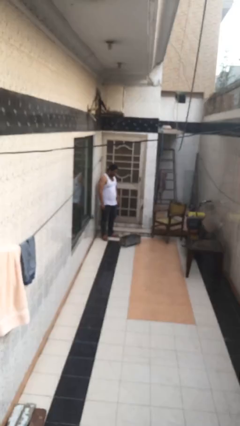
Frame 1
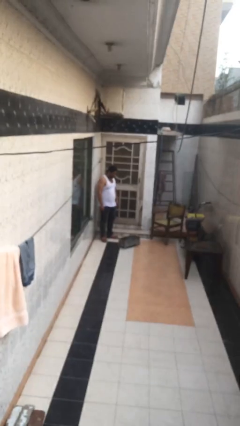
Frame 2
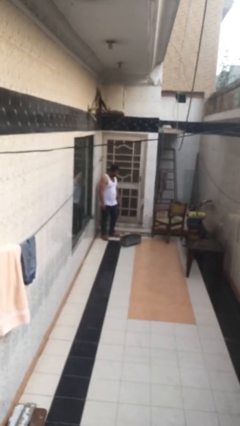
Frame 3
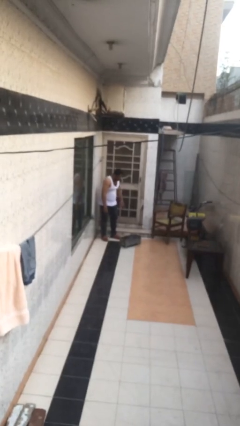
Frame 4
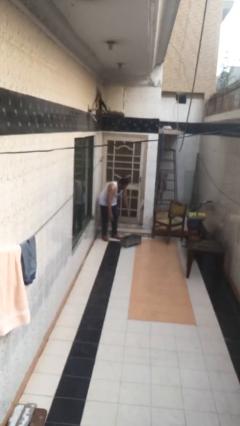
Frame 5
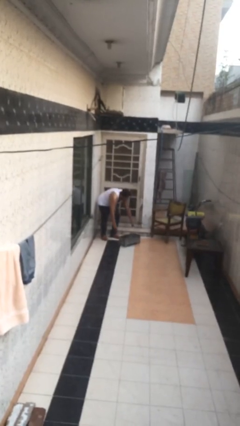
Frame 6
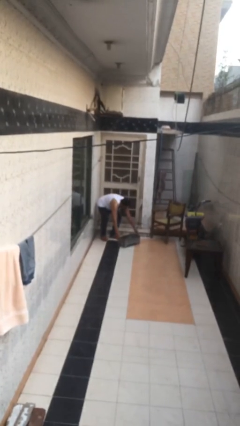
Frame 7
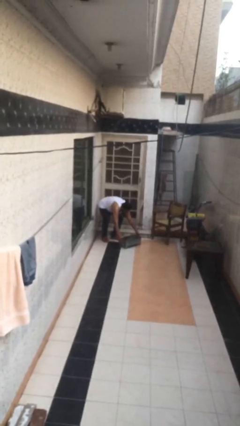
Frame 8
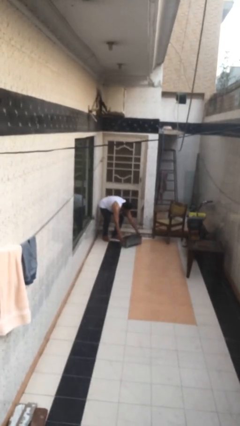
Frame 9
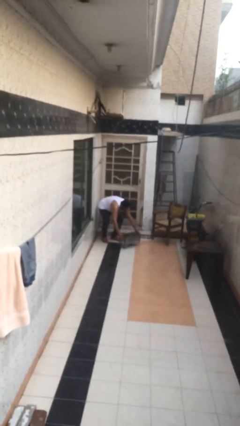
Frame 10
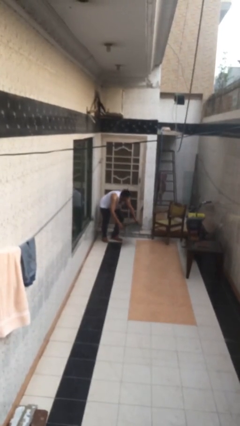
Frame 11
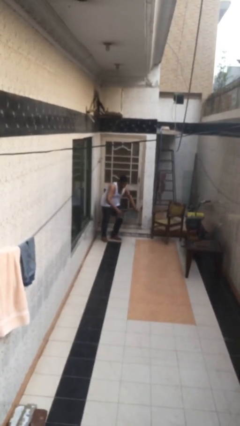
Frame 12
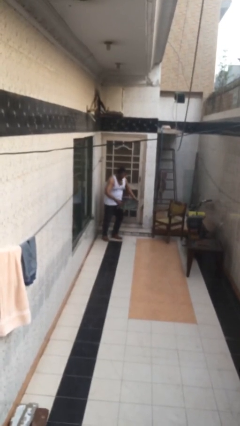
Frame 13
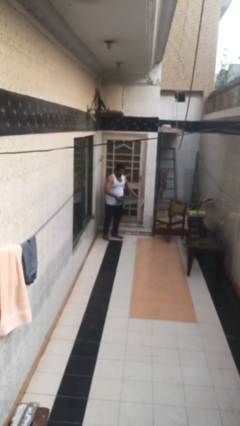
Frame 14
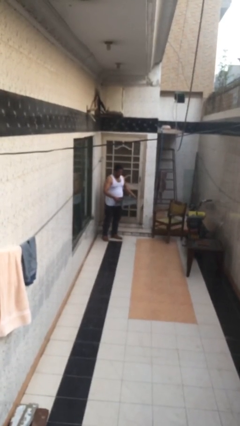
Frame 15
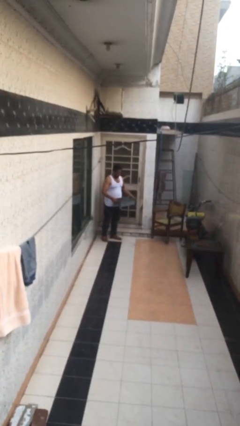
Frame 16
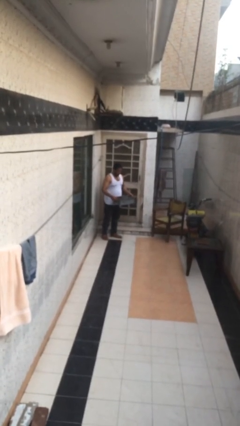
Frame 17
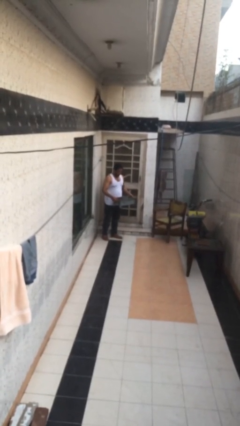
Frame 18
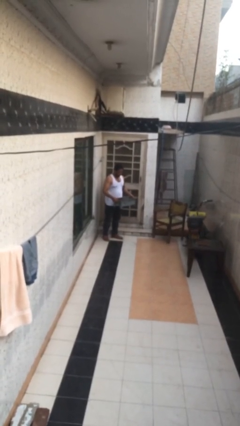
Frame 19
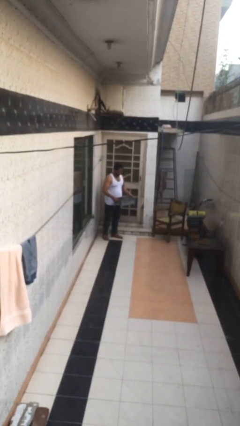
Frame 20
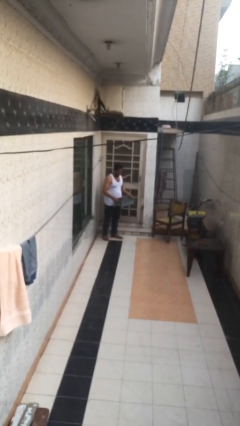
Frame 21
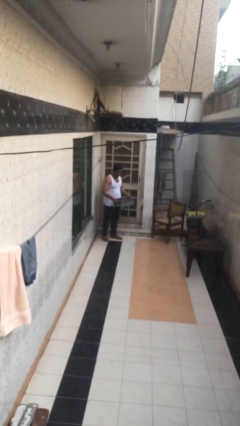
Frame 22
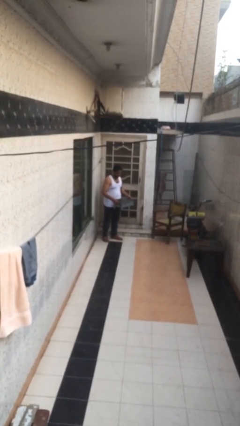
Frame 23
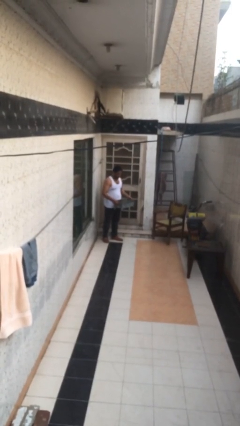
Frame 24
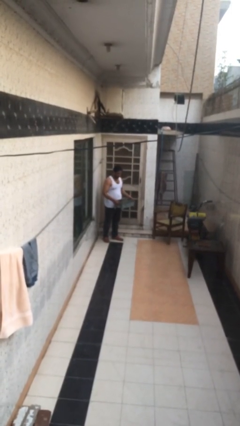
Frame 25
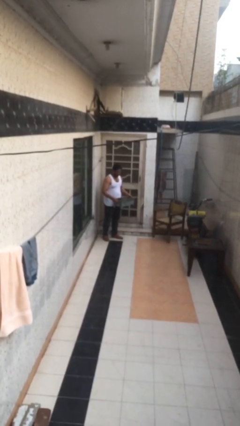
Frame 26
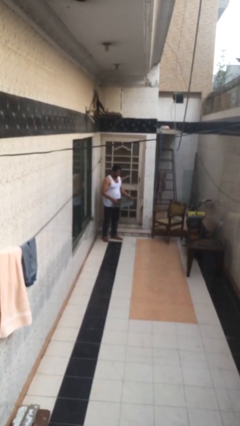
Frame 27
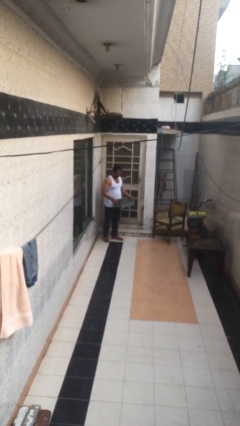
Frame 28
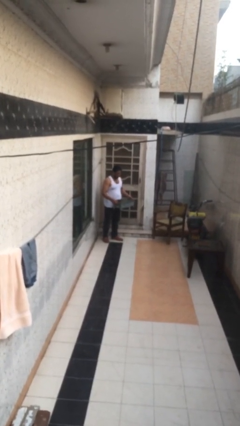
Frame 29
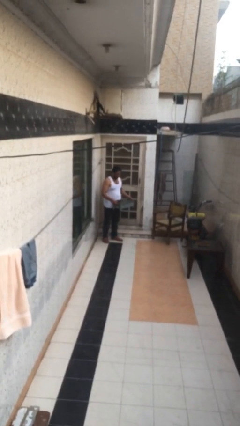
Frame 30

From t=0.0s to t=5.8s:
person picks up object from floor

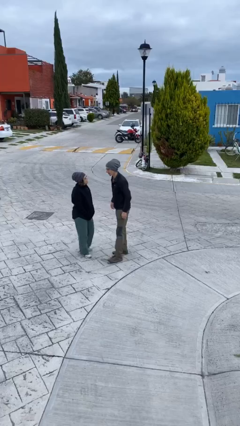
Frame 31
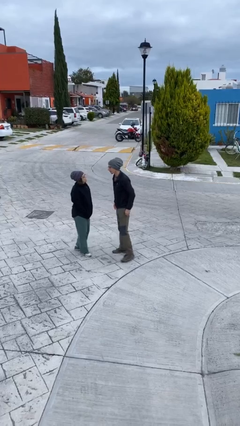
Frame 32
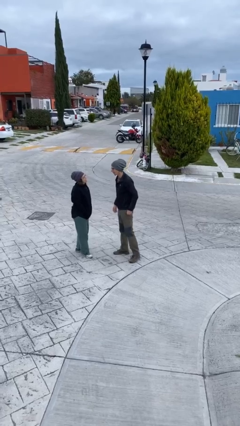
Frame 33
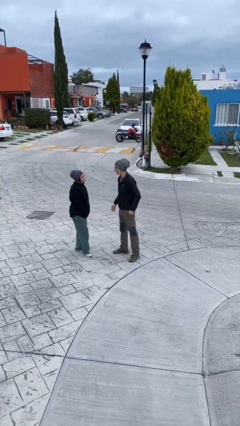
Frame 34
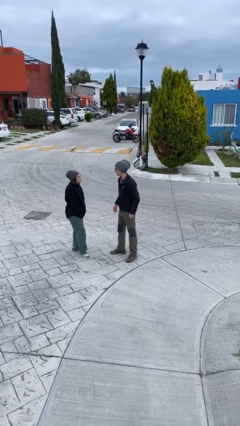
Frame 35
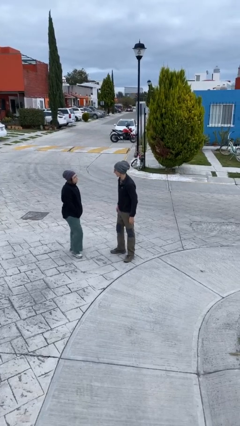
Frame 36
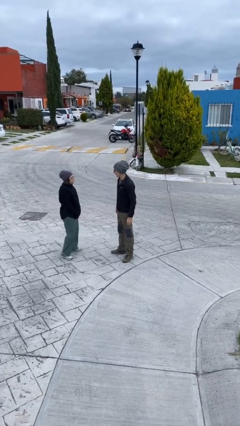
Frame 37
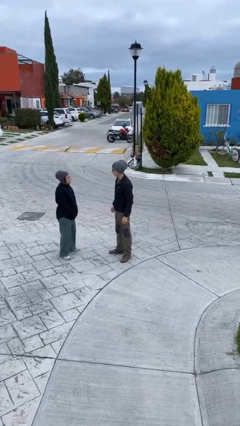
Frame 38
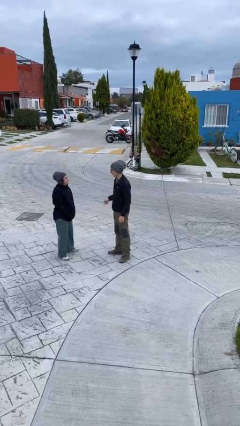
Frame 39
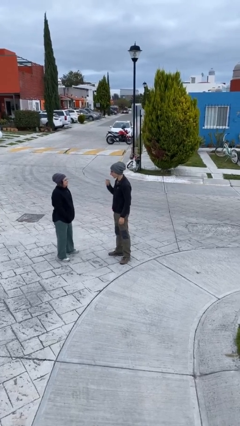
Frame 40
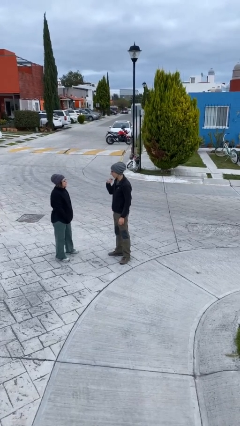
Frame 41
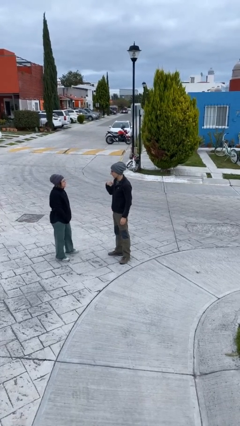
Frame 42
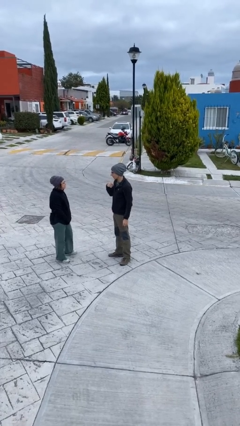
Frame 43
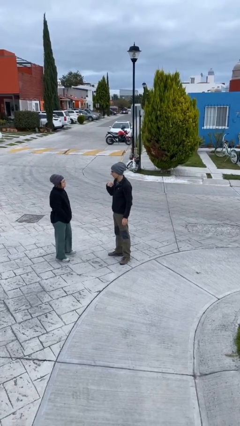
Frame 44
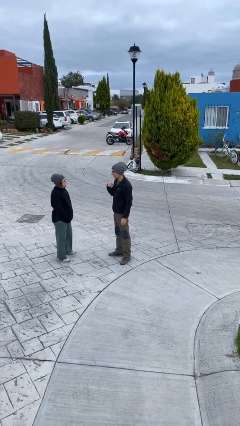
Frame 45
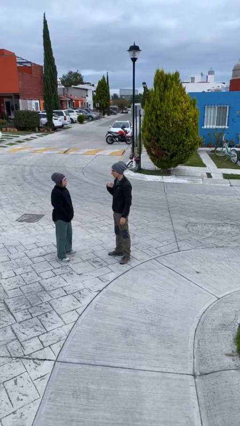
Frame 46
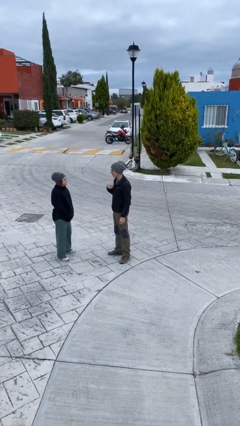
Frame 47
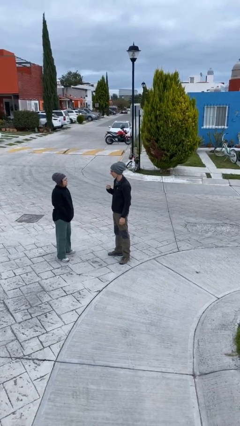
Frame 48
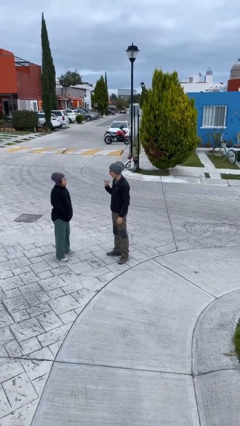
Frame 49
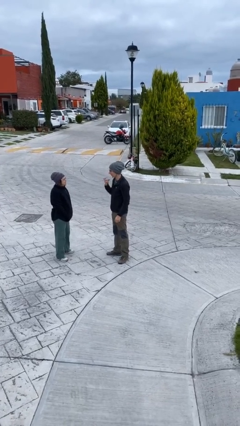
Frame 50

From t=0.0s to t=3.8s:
person talks to person

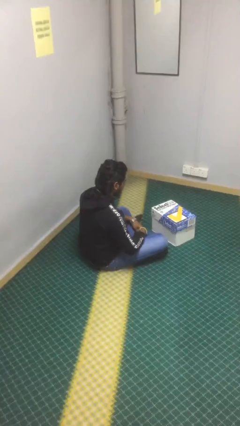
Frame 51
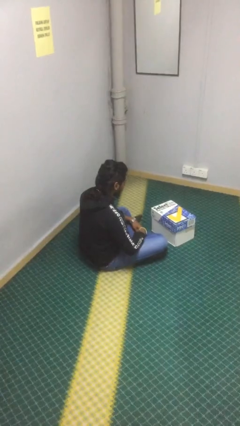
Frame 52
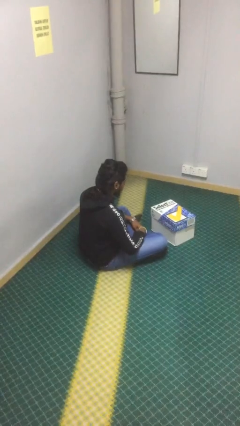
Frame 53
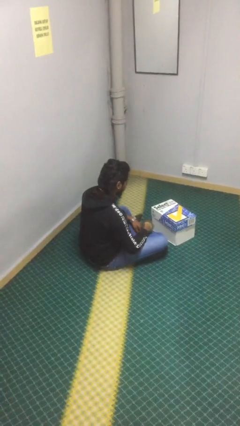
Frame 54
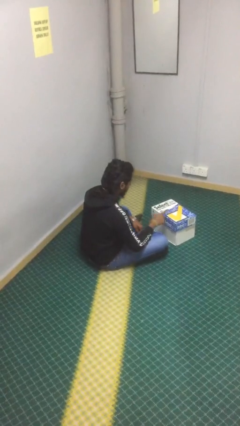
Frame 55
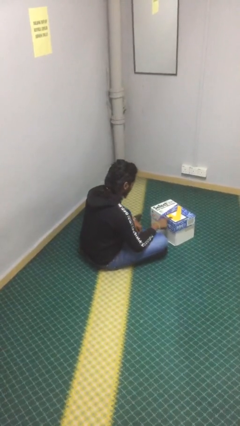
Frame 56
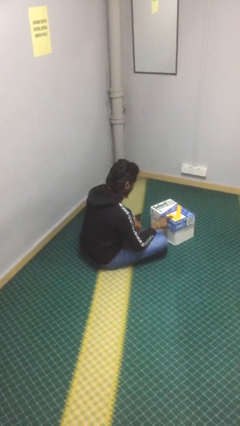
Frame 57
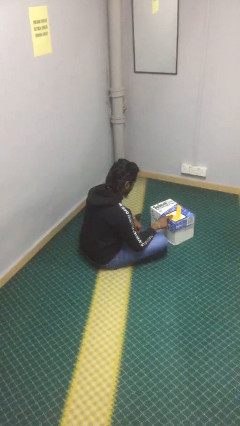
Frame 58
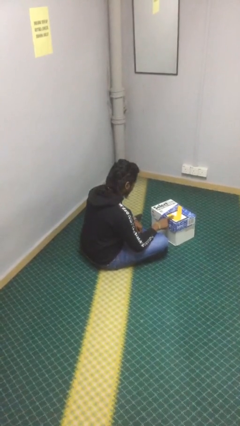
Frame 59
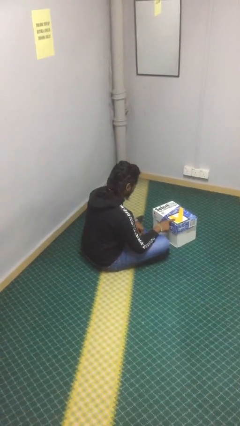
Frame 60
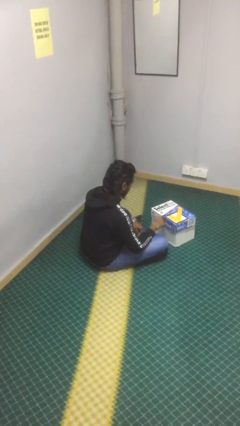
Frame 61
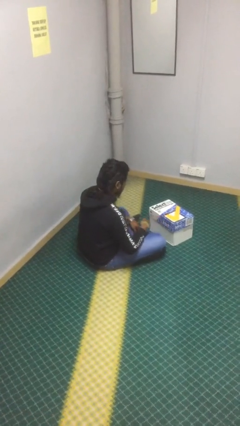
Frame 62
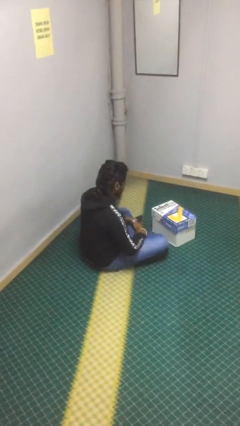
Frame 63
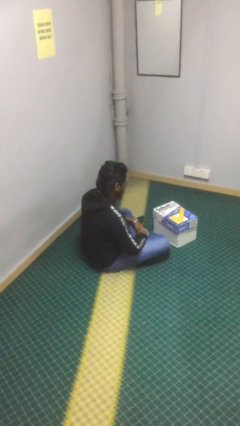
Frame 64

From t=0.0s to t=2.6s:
person taps object with finger

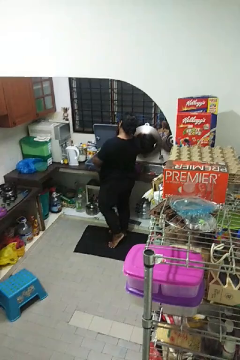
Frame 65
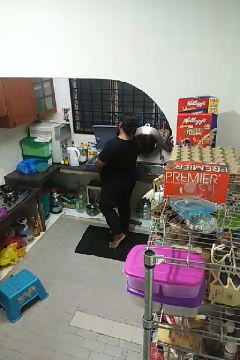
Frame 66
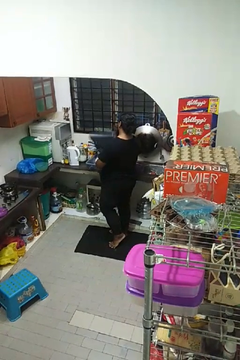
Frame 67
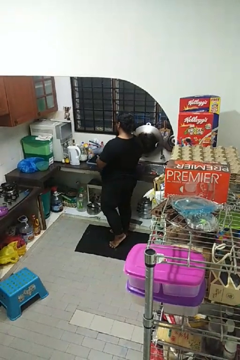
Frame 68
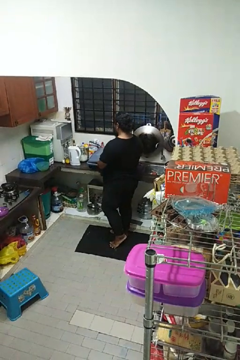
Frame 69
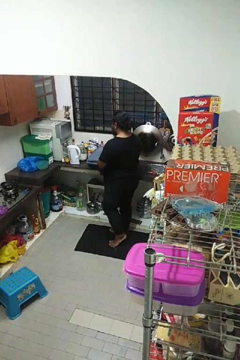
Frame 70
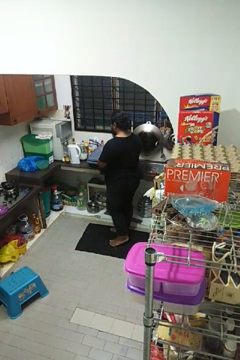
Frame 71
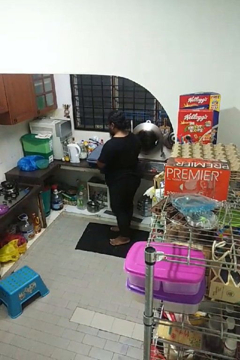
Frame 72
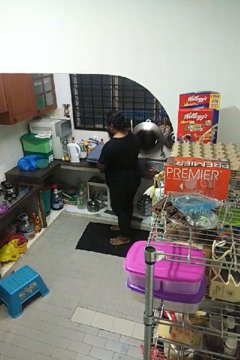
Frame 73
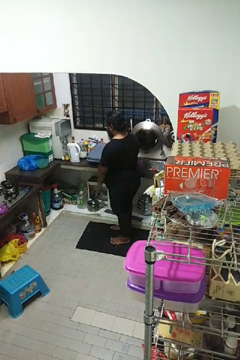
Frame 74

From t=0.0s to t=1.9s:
person closes dishwasher

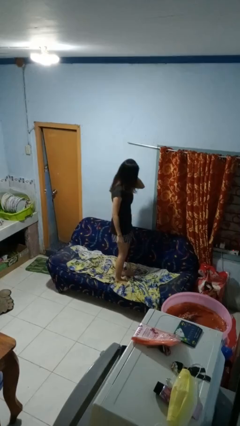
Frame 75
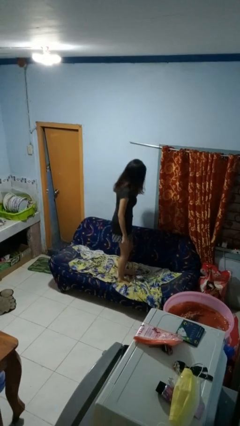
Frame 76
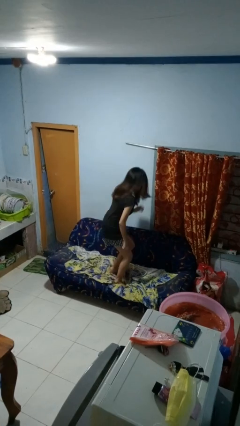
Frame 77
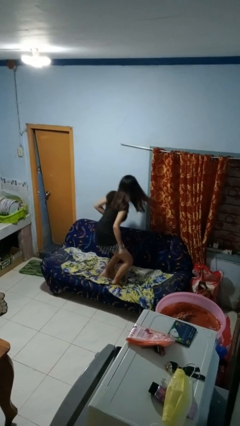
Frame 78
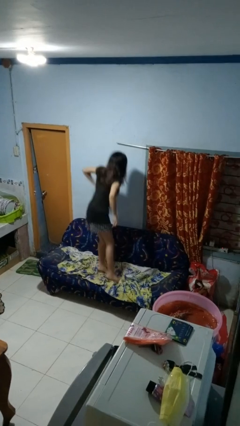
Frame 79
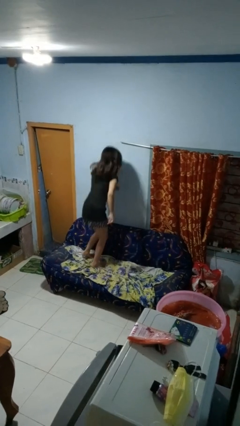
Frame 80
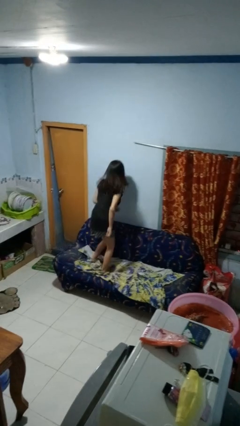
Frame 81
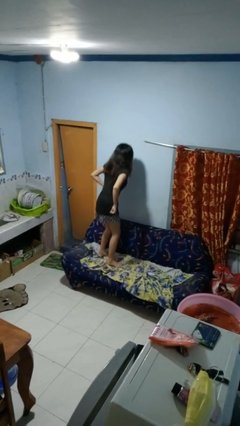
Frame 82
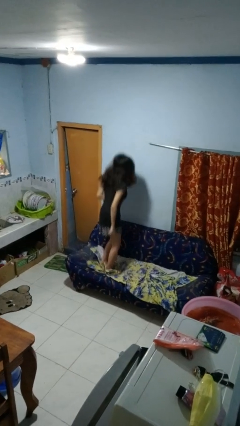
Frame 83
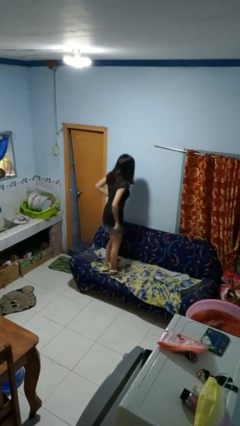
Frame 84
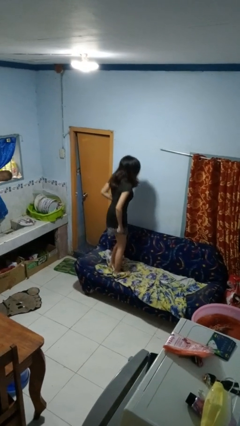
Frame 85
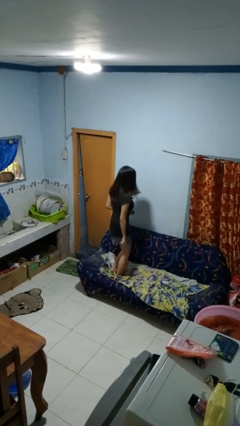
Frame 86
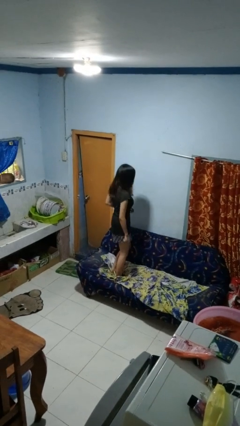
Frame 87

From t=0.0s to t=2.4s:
person jumps on couch

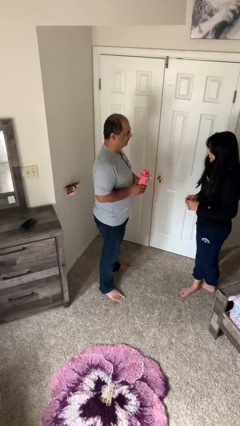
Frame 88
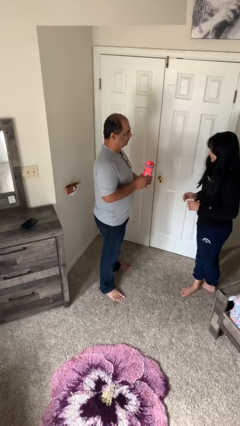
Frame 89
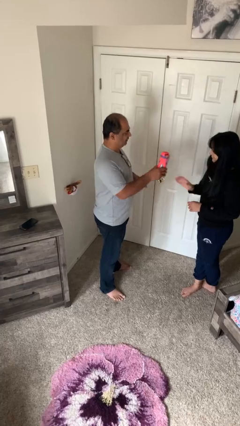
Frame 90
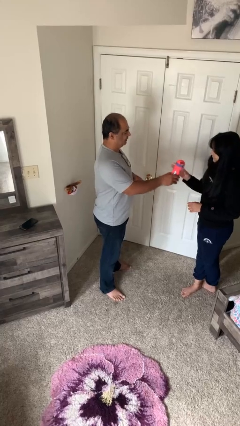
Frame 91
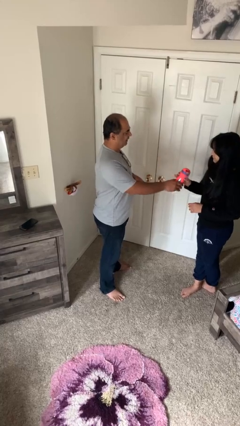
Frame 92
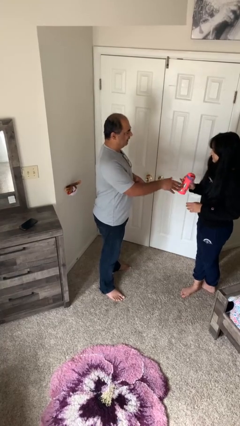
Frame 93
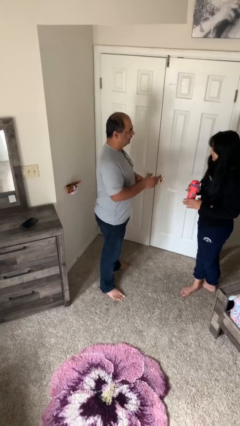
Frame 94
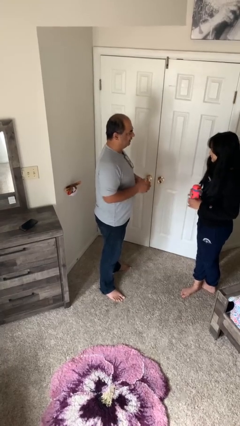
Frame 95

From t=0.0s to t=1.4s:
person transfers object to person
